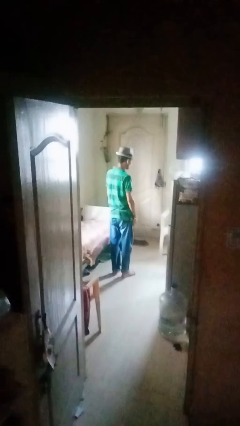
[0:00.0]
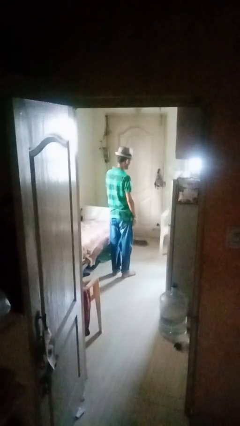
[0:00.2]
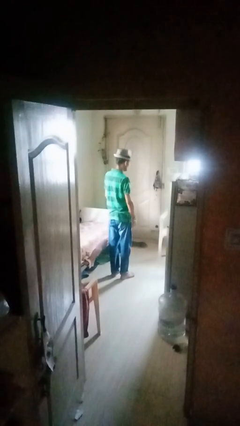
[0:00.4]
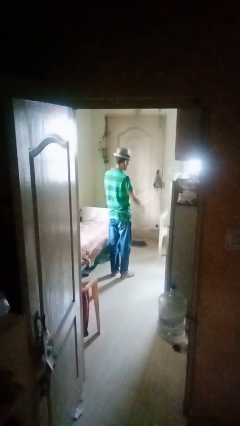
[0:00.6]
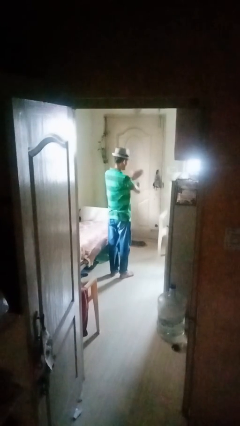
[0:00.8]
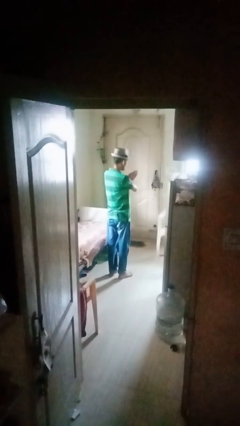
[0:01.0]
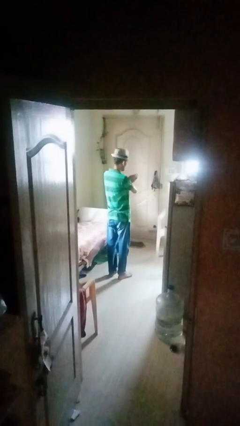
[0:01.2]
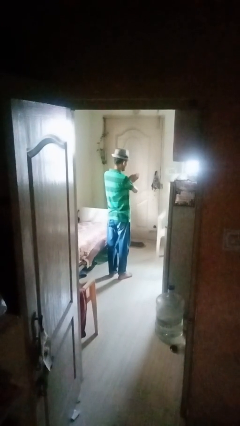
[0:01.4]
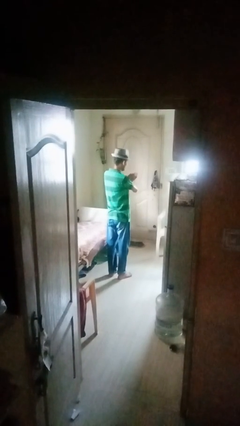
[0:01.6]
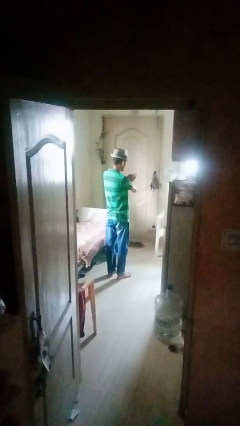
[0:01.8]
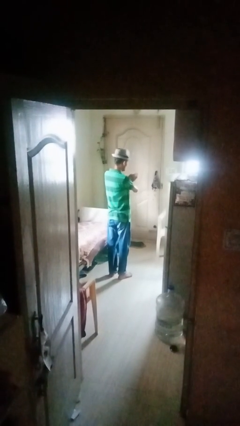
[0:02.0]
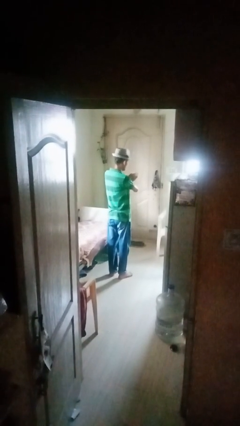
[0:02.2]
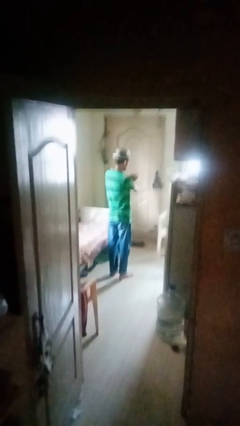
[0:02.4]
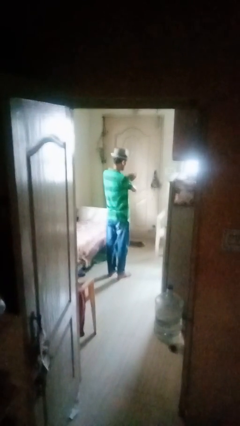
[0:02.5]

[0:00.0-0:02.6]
person gestures arms x

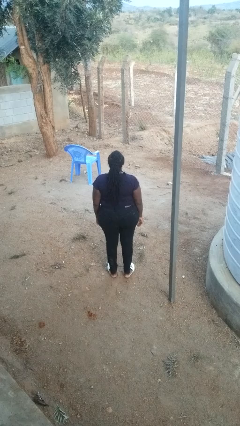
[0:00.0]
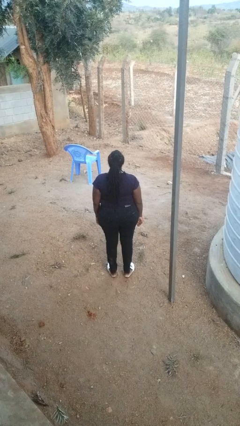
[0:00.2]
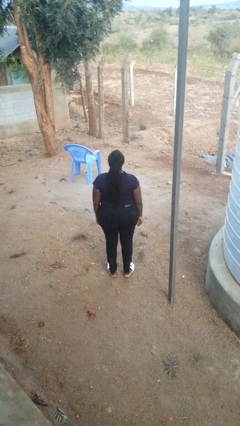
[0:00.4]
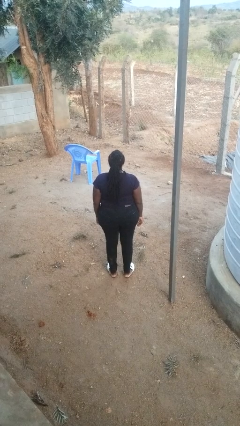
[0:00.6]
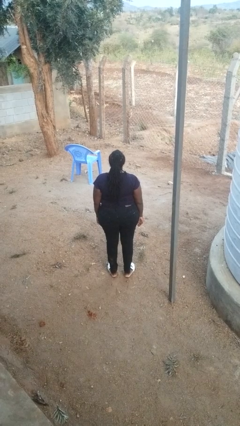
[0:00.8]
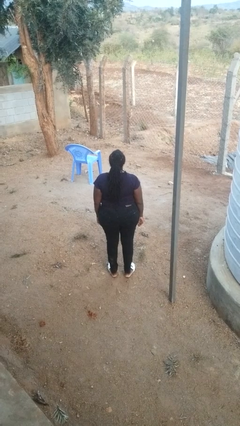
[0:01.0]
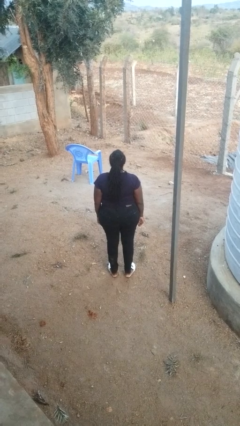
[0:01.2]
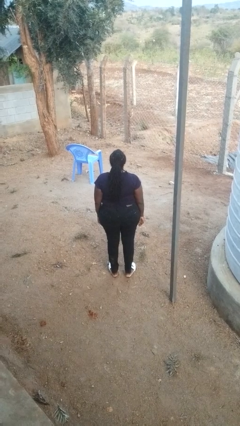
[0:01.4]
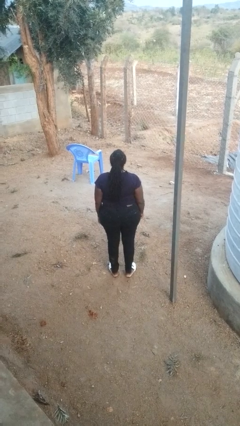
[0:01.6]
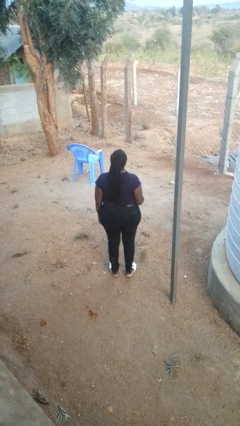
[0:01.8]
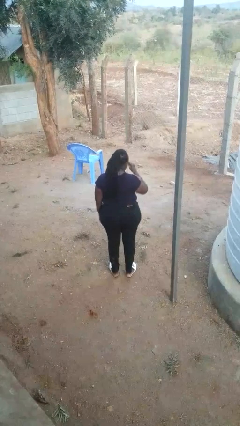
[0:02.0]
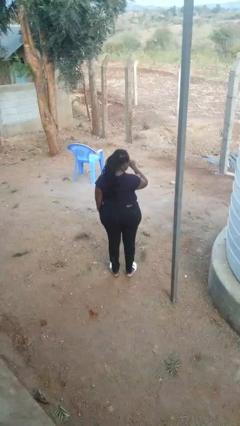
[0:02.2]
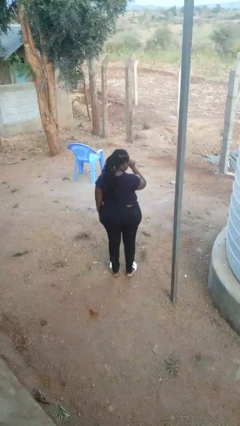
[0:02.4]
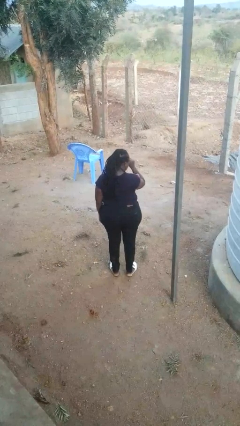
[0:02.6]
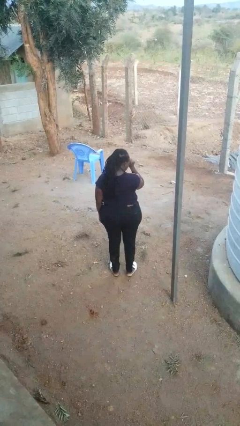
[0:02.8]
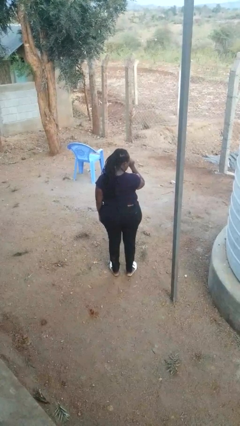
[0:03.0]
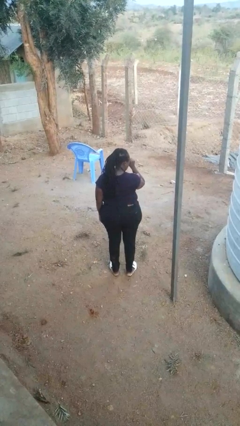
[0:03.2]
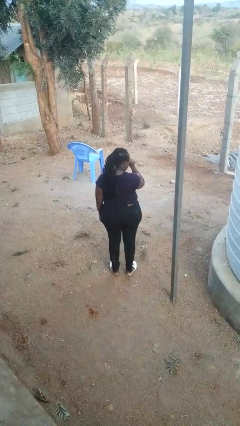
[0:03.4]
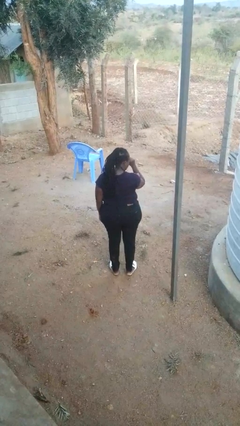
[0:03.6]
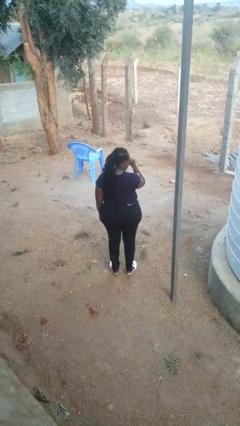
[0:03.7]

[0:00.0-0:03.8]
person rubs eyes

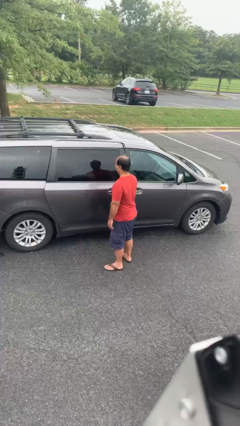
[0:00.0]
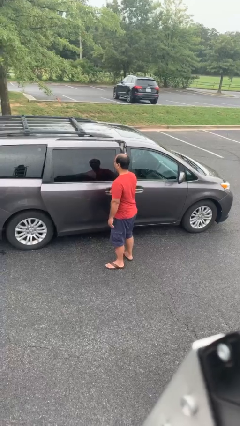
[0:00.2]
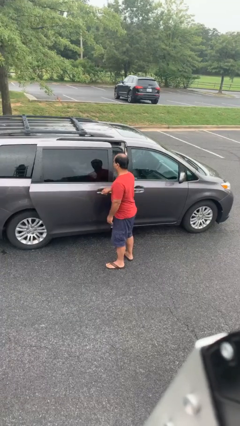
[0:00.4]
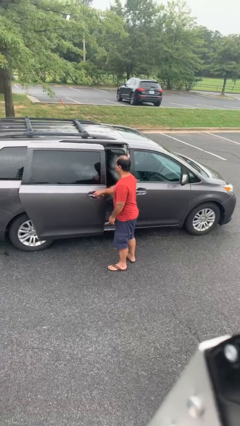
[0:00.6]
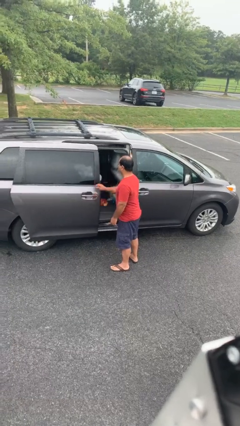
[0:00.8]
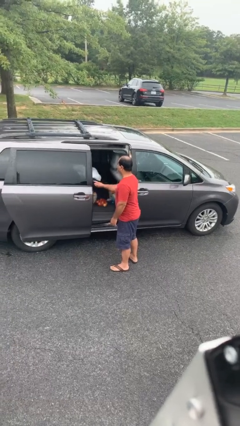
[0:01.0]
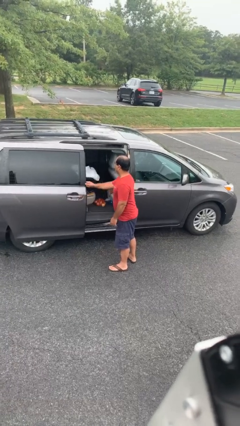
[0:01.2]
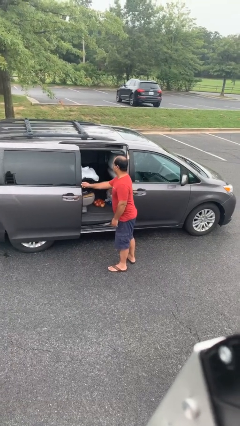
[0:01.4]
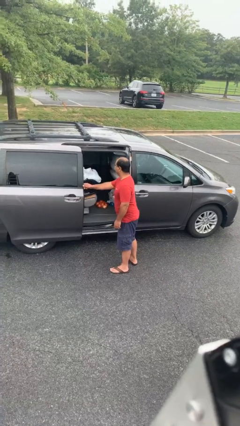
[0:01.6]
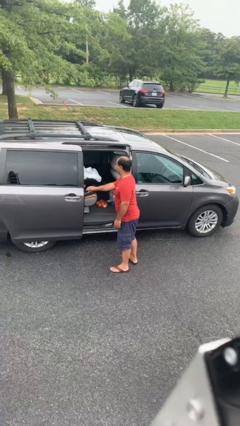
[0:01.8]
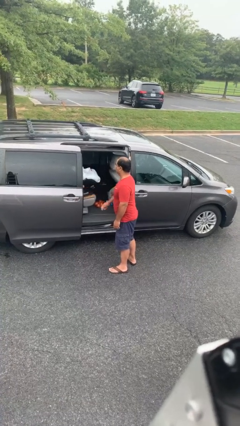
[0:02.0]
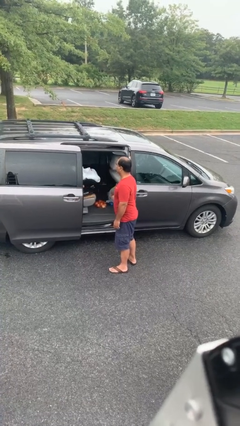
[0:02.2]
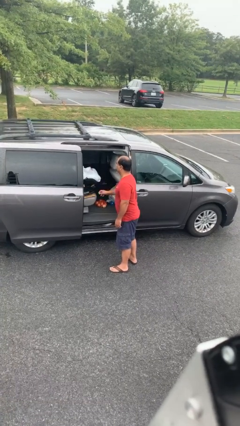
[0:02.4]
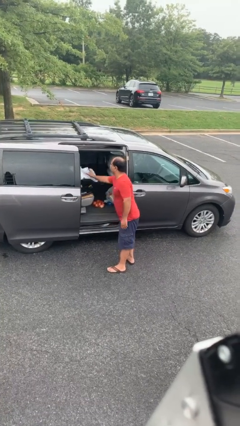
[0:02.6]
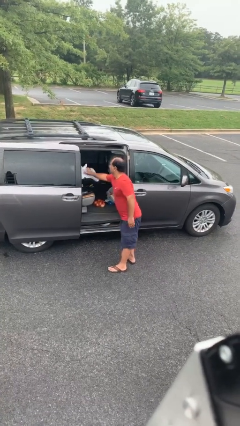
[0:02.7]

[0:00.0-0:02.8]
person opens car door

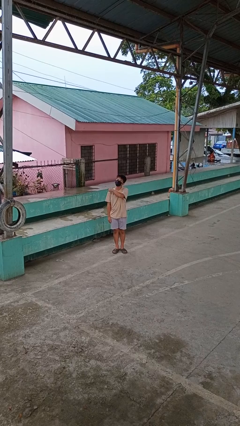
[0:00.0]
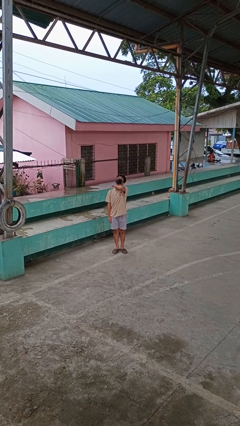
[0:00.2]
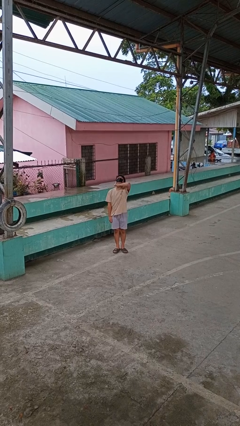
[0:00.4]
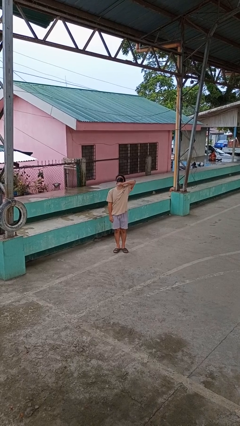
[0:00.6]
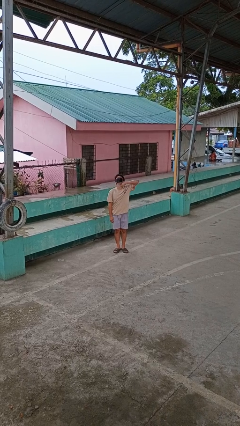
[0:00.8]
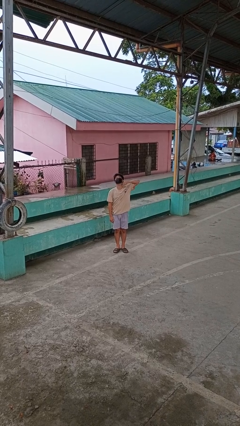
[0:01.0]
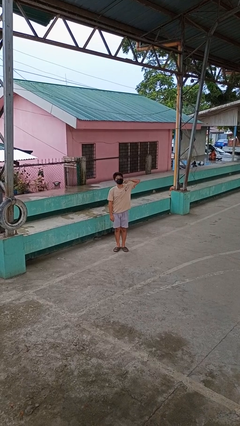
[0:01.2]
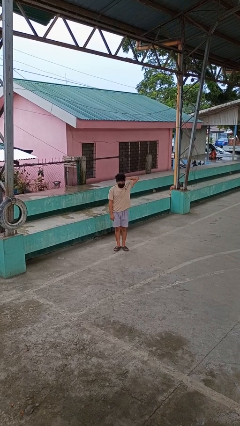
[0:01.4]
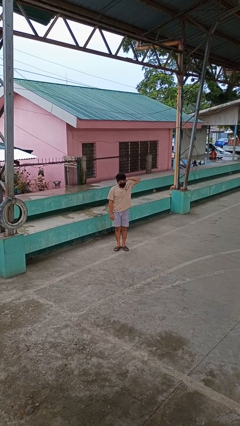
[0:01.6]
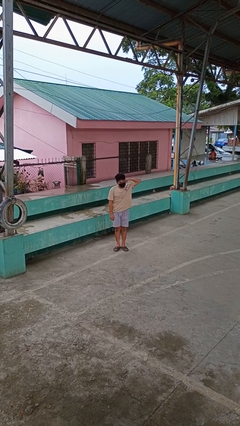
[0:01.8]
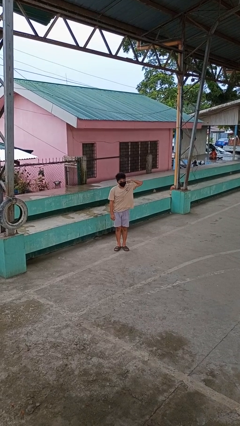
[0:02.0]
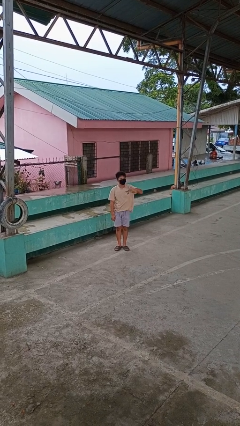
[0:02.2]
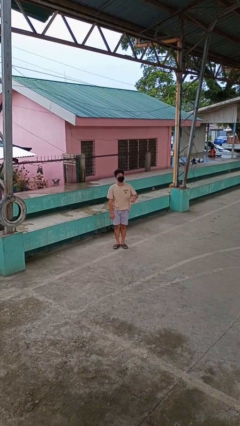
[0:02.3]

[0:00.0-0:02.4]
person gestures cut

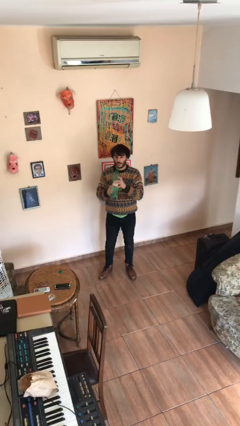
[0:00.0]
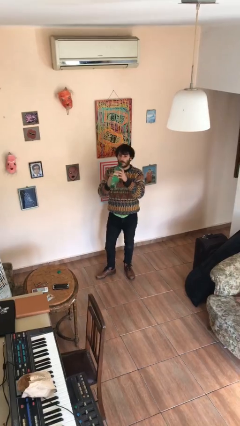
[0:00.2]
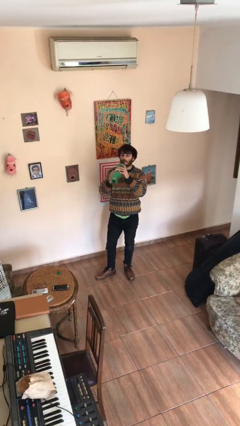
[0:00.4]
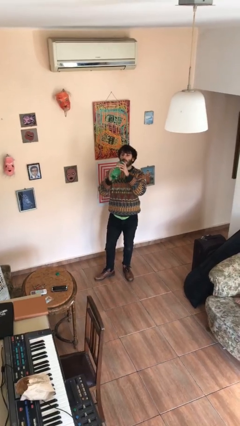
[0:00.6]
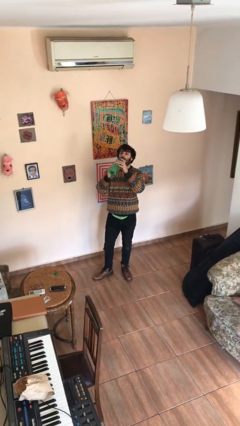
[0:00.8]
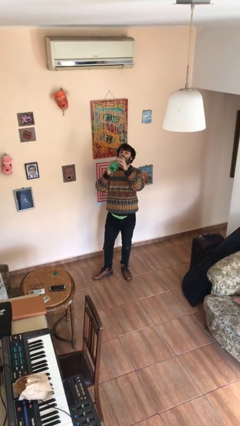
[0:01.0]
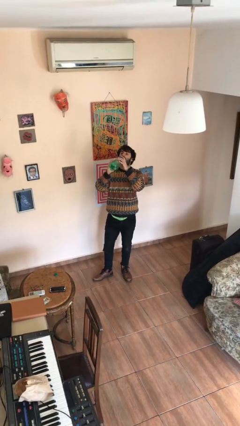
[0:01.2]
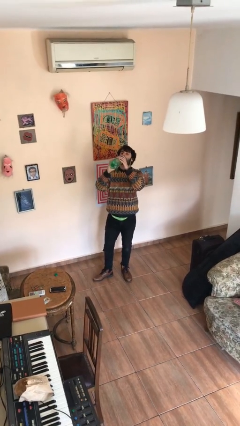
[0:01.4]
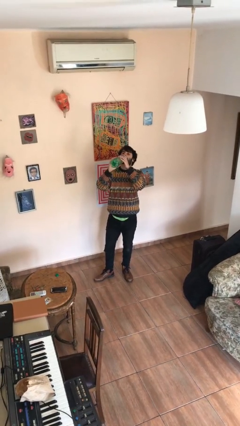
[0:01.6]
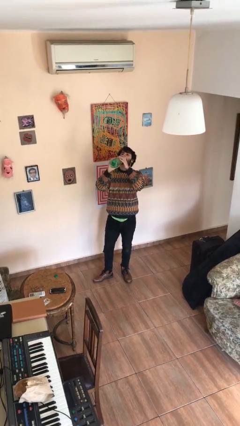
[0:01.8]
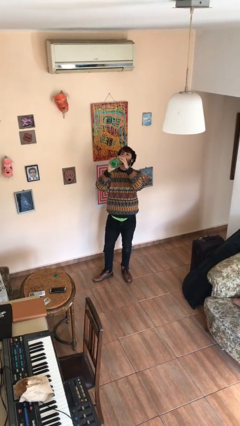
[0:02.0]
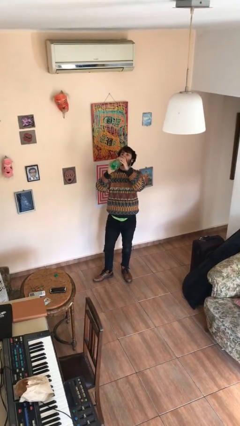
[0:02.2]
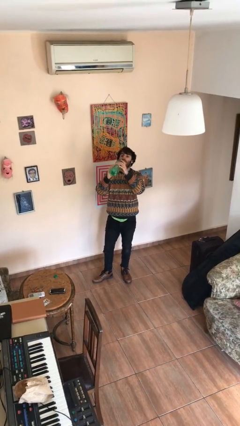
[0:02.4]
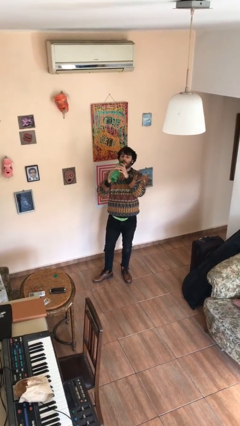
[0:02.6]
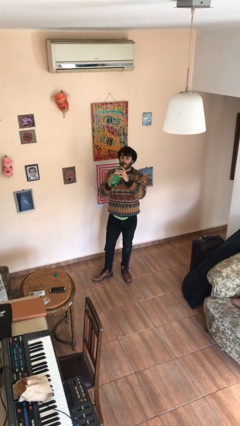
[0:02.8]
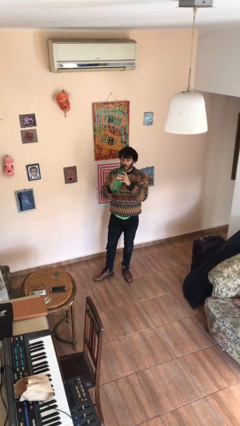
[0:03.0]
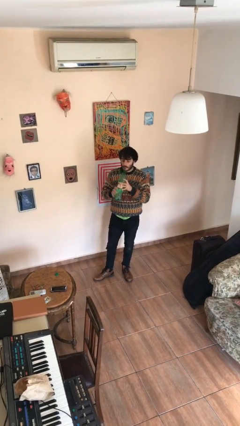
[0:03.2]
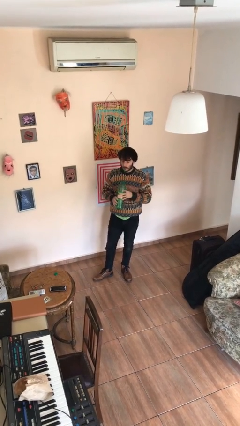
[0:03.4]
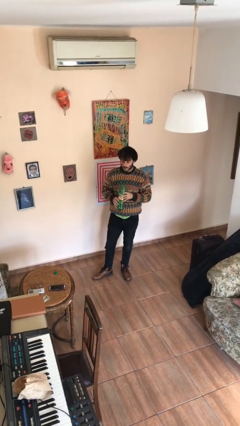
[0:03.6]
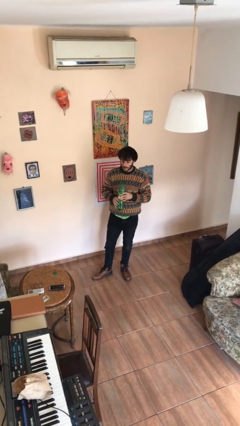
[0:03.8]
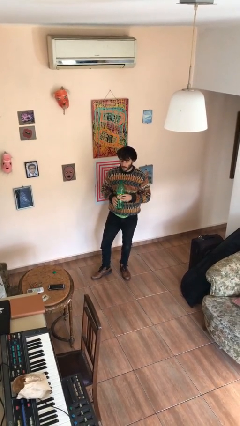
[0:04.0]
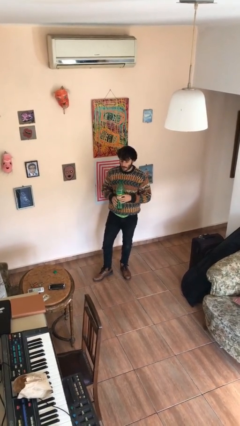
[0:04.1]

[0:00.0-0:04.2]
person drinks from bottle

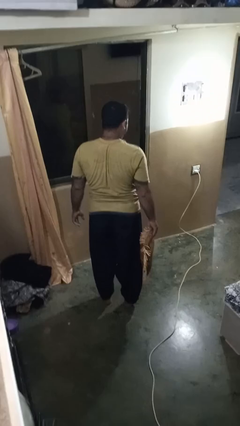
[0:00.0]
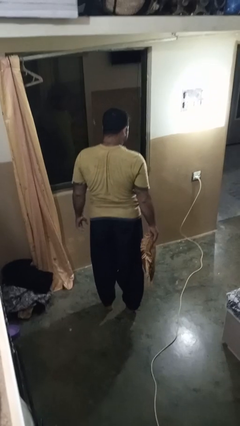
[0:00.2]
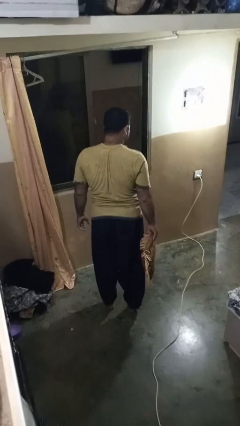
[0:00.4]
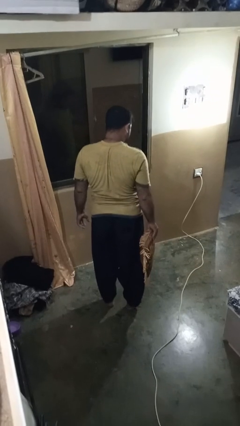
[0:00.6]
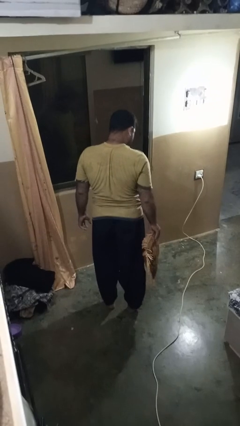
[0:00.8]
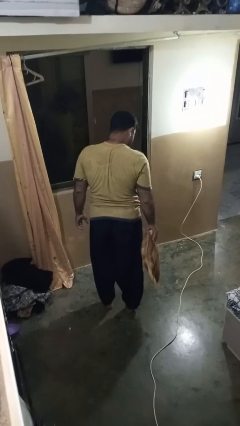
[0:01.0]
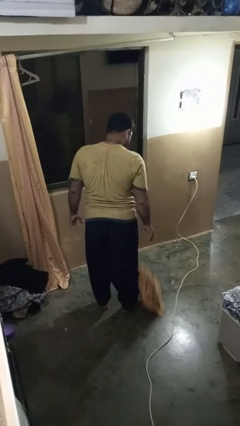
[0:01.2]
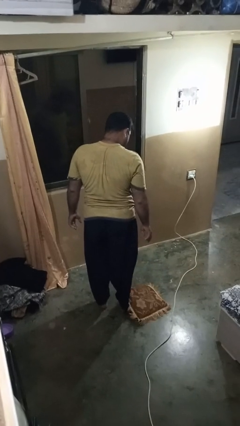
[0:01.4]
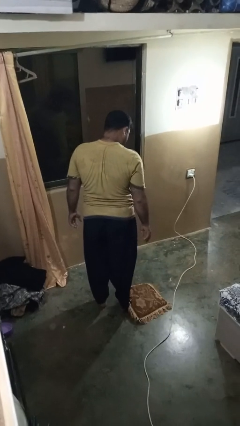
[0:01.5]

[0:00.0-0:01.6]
person drops object
